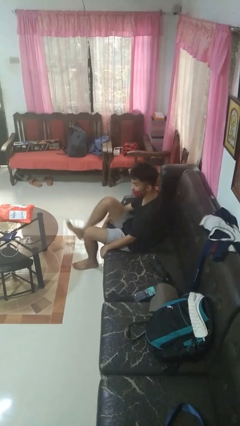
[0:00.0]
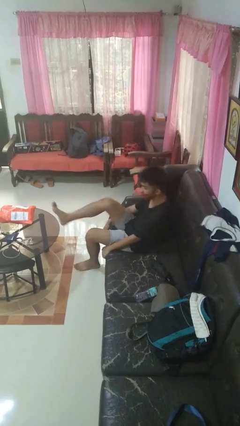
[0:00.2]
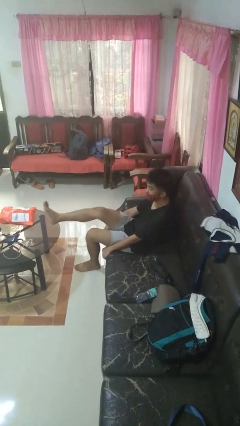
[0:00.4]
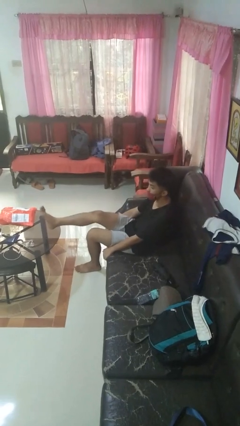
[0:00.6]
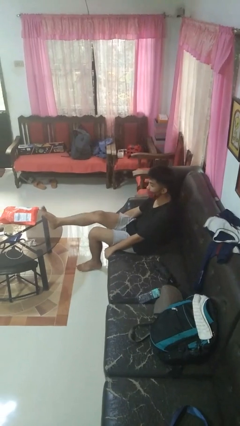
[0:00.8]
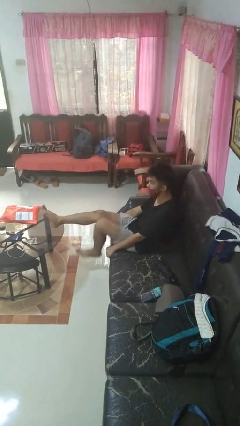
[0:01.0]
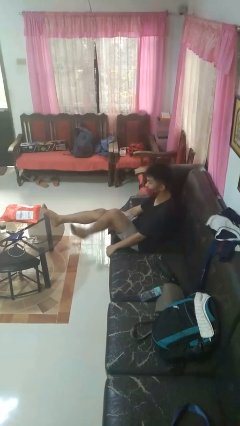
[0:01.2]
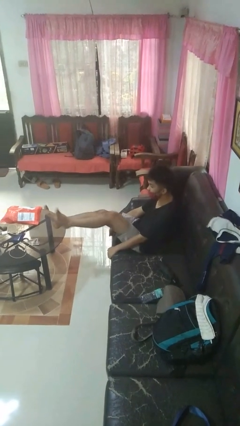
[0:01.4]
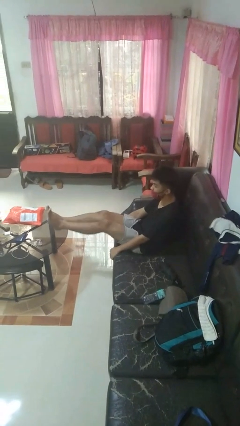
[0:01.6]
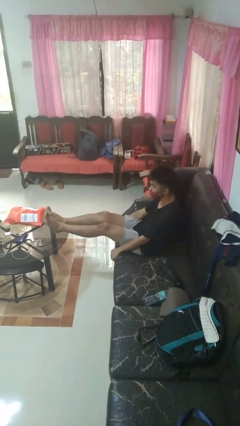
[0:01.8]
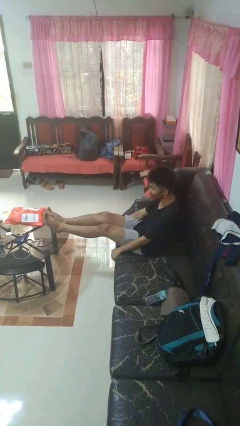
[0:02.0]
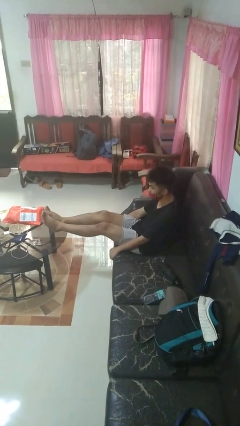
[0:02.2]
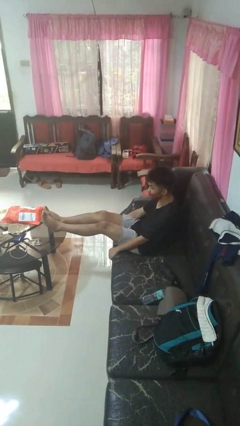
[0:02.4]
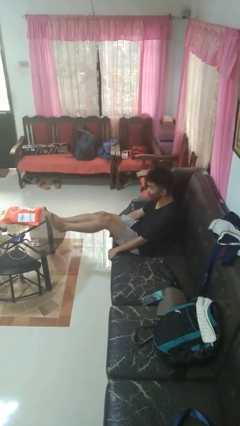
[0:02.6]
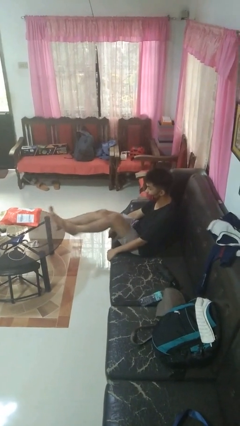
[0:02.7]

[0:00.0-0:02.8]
person puts feet up

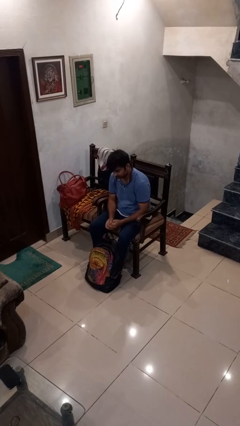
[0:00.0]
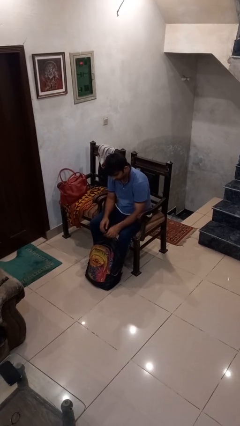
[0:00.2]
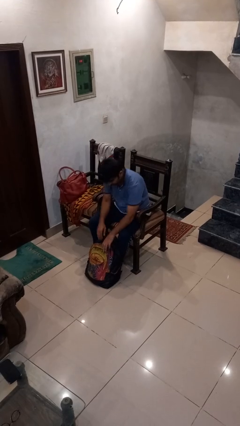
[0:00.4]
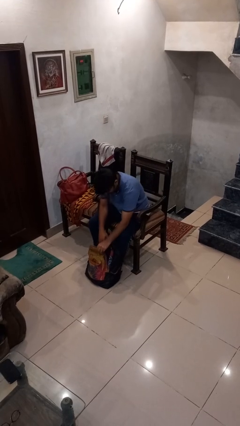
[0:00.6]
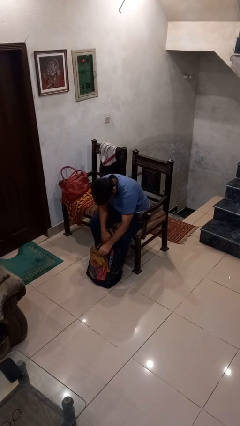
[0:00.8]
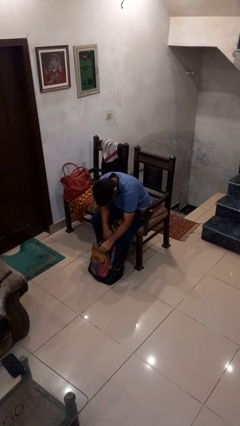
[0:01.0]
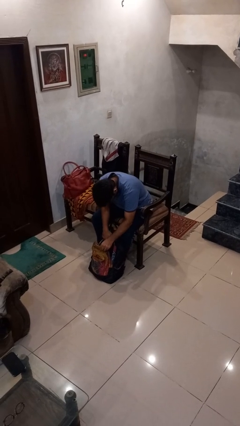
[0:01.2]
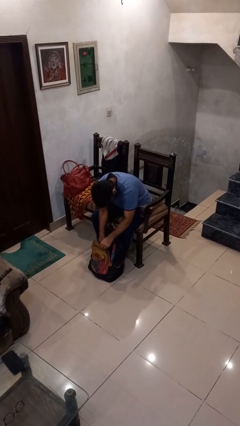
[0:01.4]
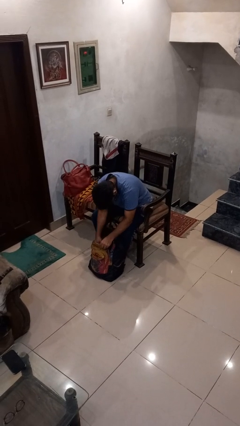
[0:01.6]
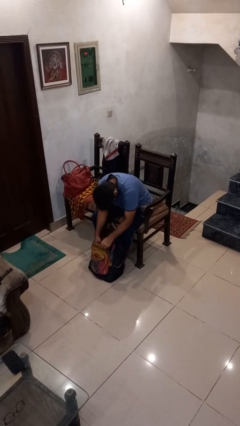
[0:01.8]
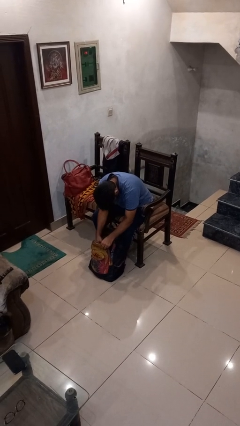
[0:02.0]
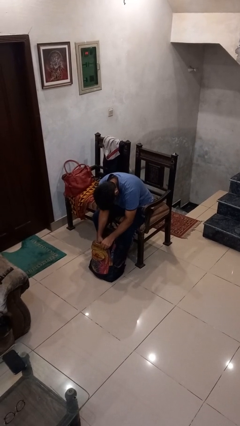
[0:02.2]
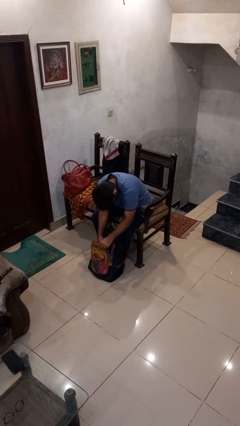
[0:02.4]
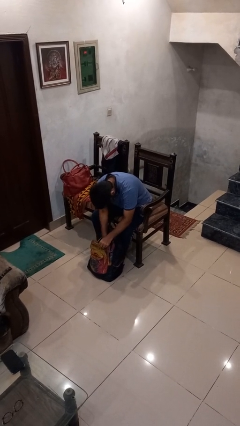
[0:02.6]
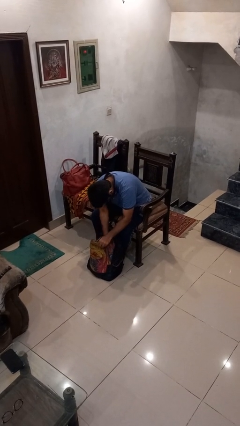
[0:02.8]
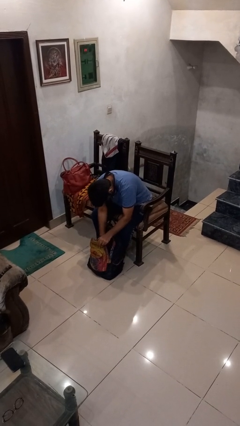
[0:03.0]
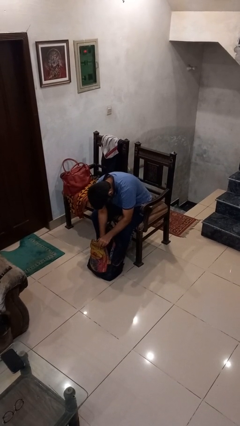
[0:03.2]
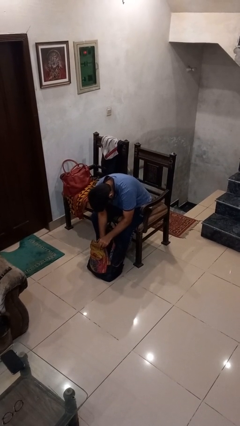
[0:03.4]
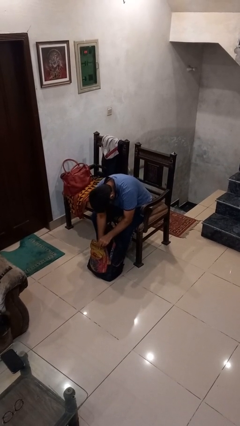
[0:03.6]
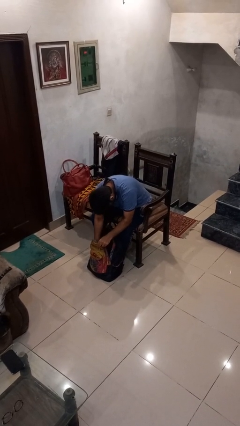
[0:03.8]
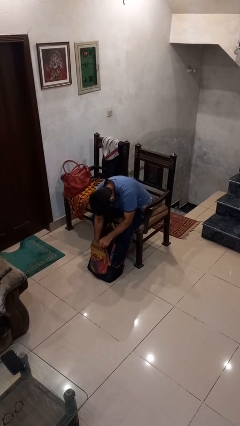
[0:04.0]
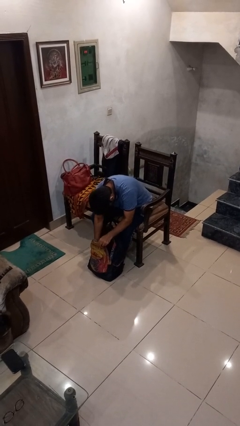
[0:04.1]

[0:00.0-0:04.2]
person searches in backpack

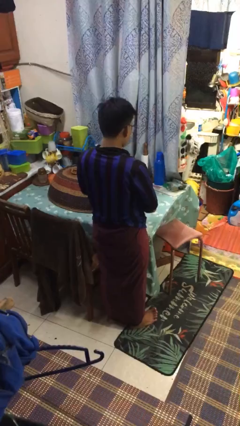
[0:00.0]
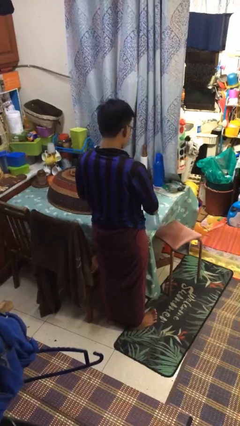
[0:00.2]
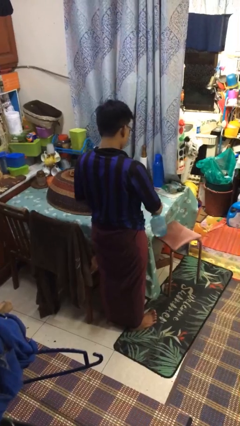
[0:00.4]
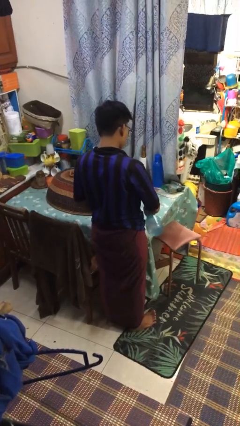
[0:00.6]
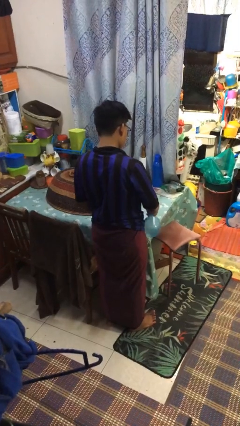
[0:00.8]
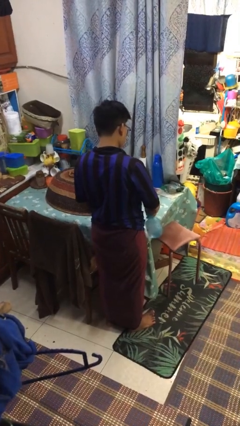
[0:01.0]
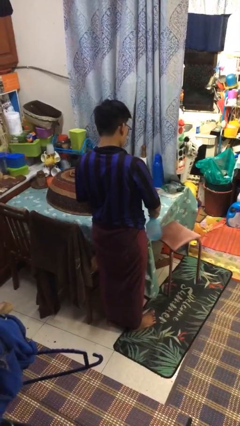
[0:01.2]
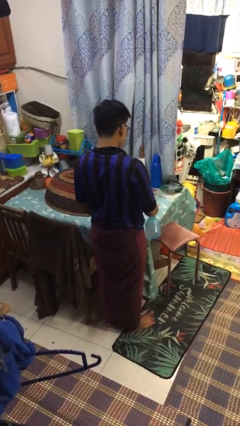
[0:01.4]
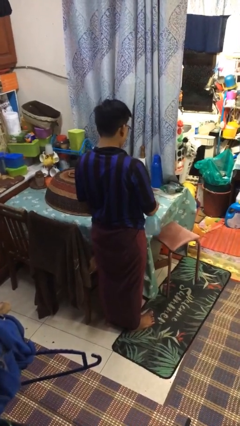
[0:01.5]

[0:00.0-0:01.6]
person sprays from bottle

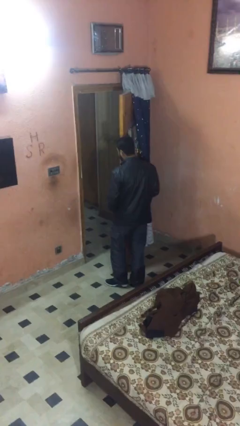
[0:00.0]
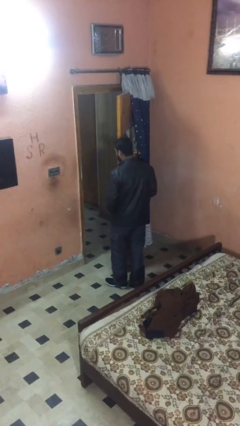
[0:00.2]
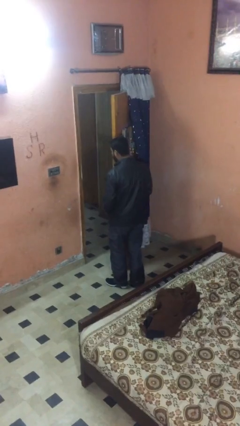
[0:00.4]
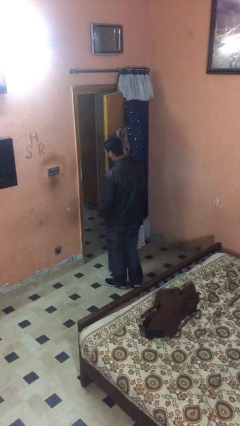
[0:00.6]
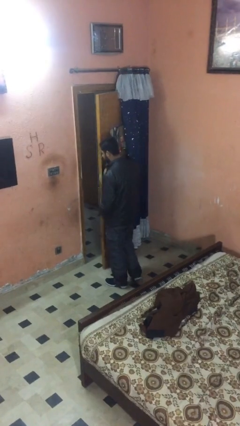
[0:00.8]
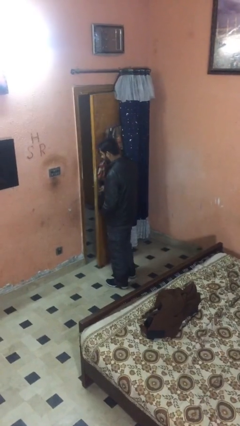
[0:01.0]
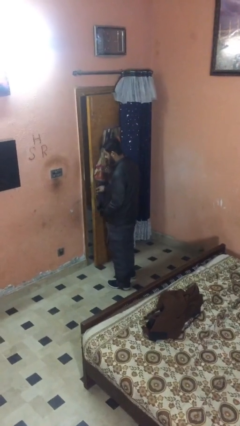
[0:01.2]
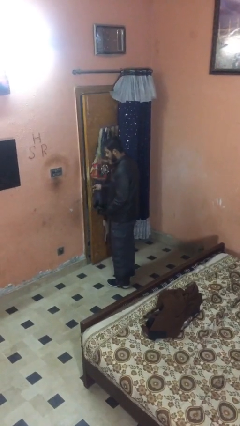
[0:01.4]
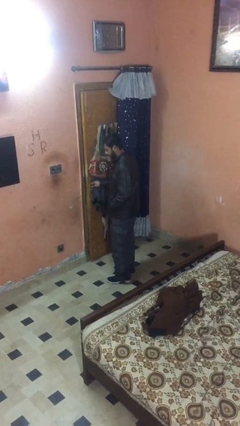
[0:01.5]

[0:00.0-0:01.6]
person closes facility door

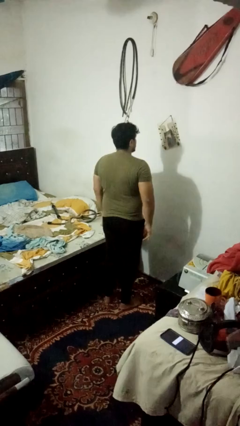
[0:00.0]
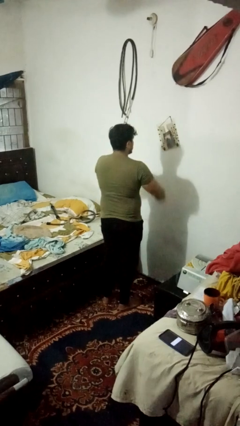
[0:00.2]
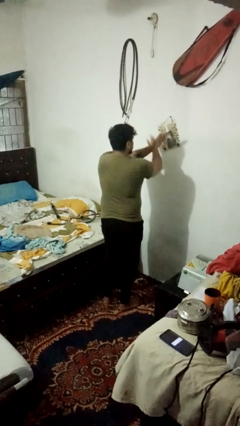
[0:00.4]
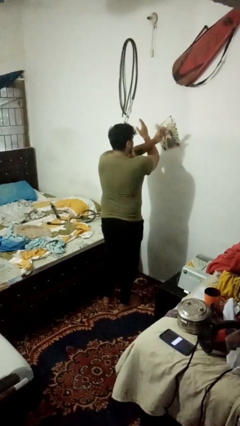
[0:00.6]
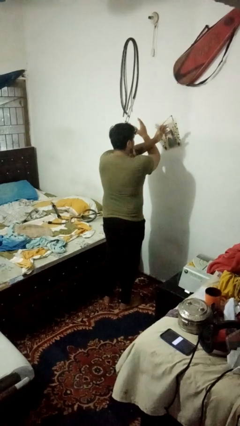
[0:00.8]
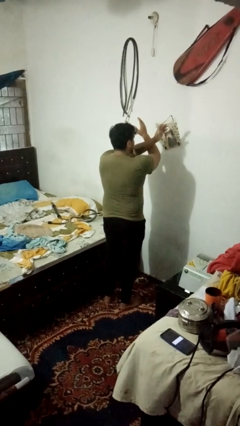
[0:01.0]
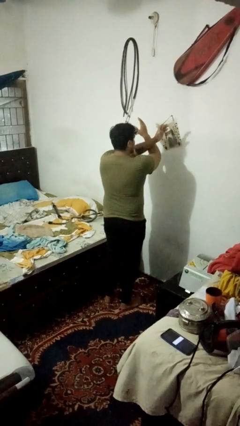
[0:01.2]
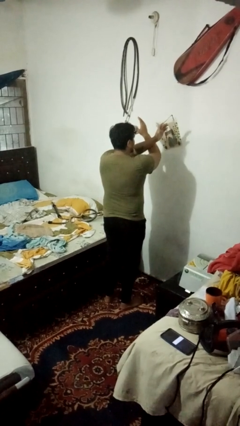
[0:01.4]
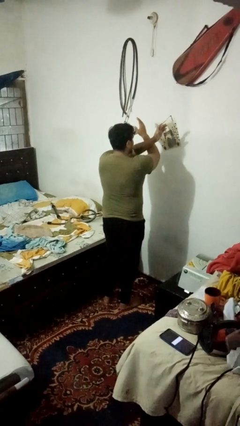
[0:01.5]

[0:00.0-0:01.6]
person gestures arms x

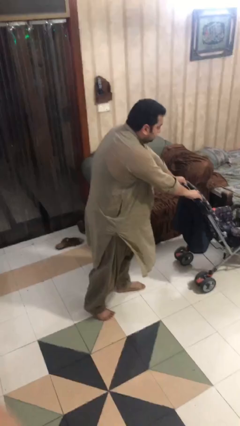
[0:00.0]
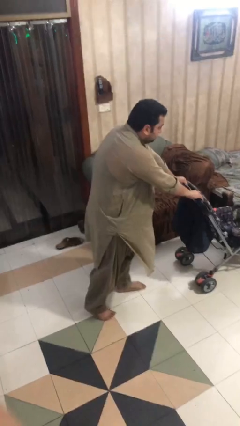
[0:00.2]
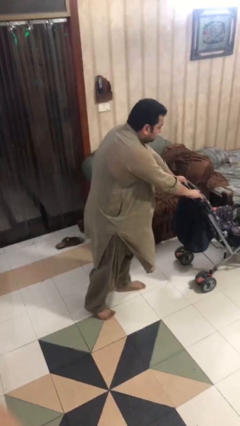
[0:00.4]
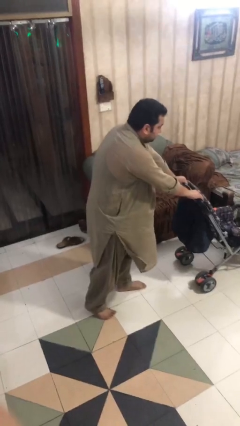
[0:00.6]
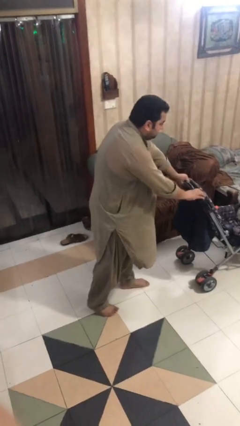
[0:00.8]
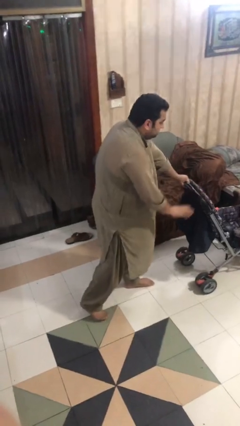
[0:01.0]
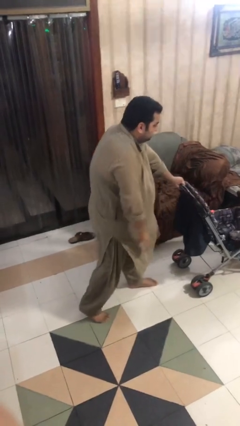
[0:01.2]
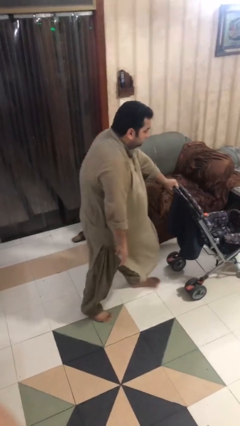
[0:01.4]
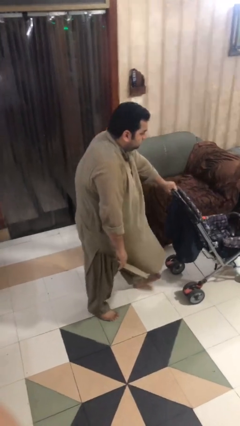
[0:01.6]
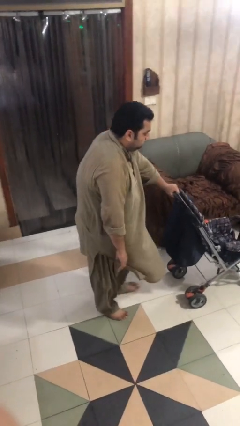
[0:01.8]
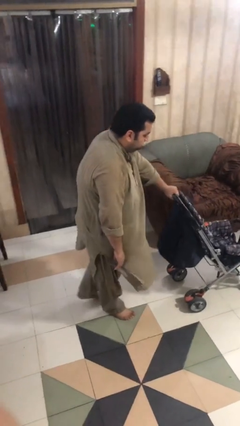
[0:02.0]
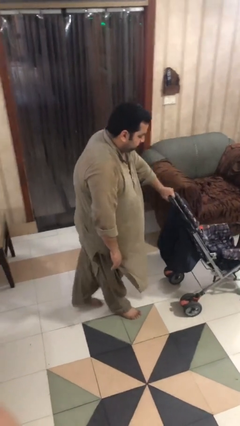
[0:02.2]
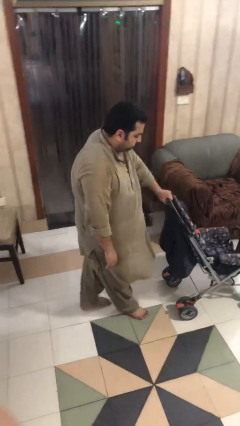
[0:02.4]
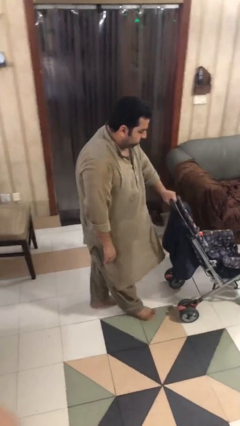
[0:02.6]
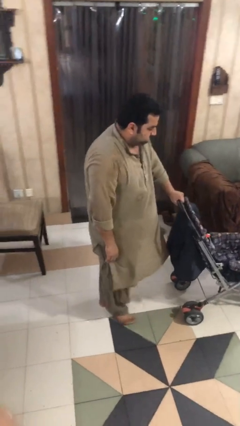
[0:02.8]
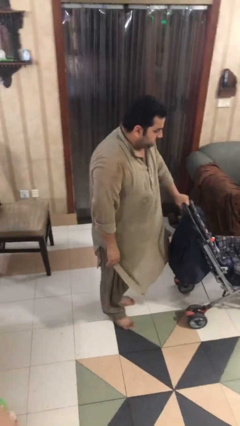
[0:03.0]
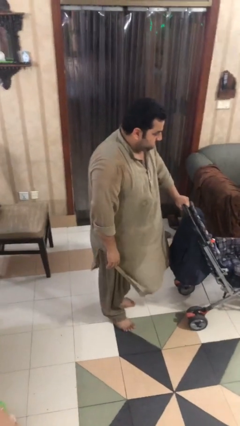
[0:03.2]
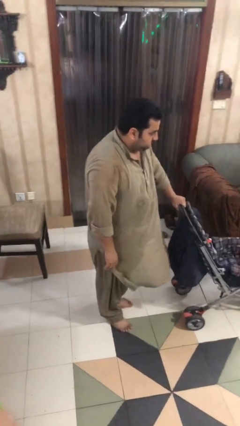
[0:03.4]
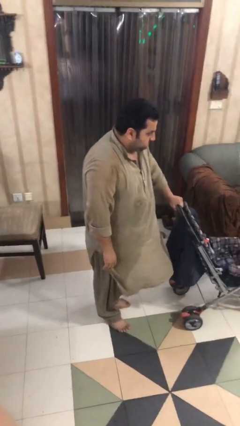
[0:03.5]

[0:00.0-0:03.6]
person pulls wheeled cart

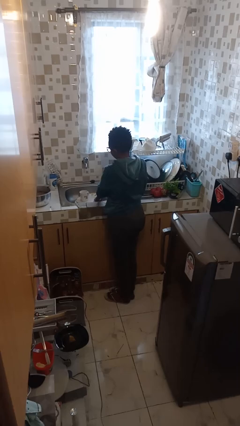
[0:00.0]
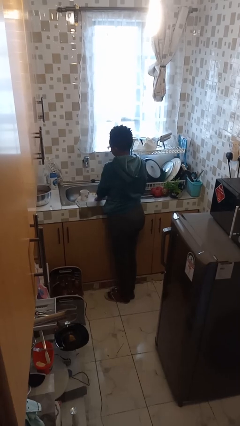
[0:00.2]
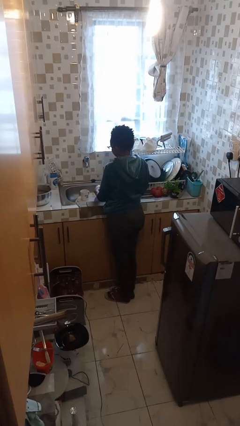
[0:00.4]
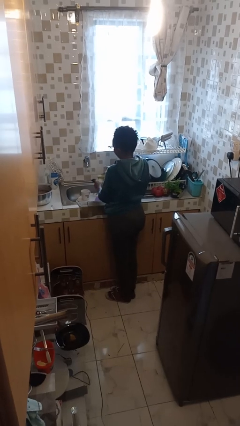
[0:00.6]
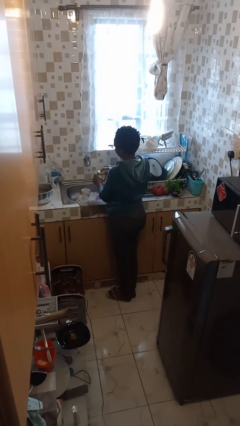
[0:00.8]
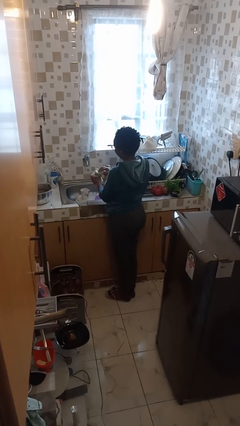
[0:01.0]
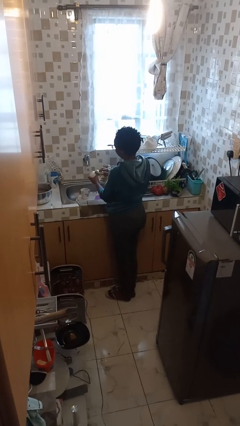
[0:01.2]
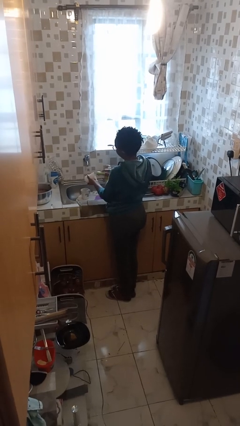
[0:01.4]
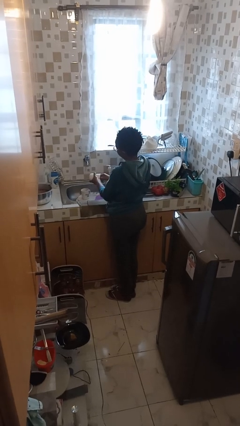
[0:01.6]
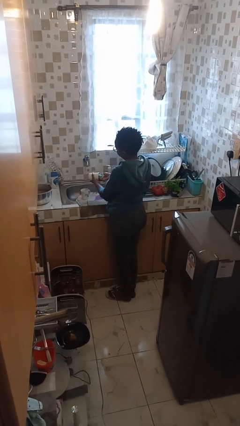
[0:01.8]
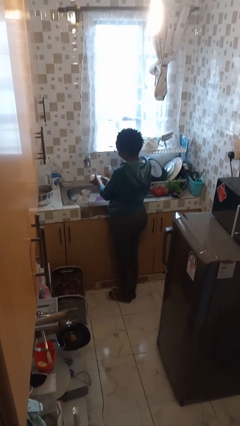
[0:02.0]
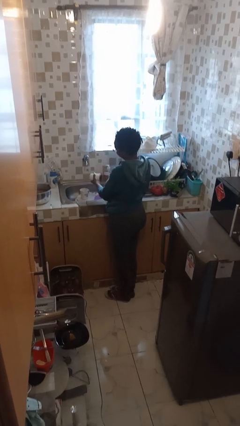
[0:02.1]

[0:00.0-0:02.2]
person washes dish
